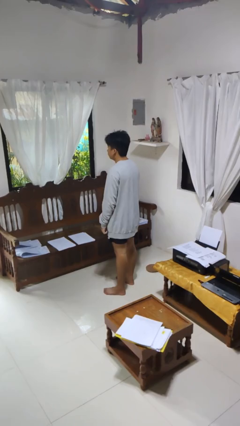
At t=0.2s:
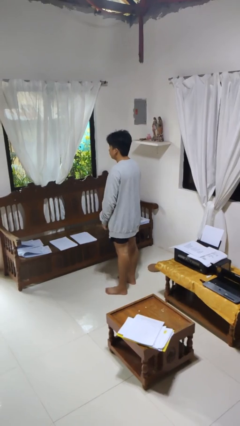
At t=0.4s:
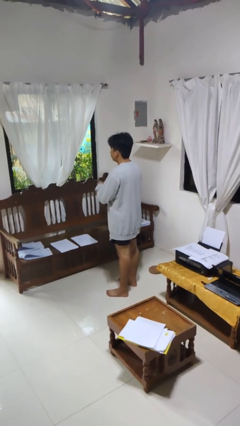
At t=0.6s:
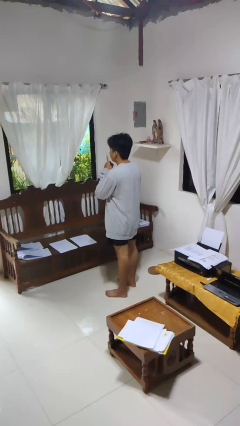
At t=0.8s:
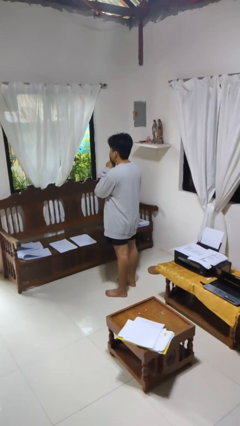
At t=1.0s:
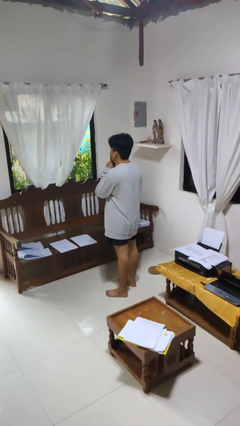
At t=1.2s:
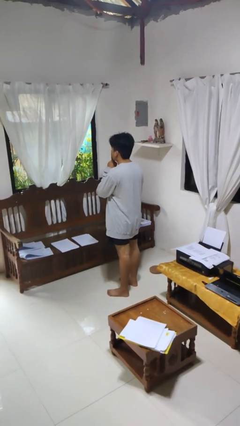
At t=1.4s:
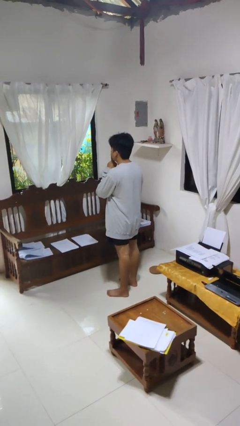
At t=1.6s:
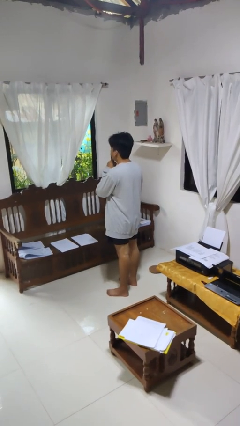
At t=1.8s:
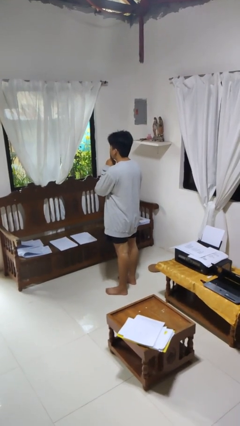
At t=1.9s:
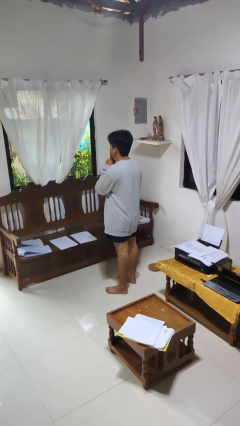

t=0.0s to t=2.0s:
person gestures be quiet

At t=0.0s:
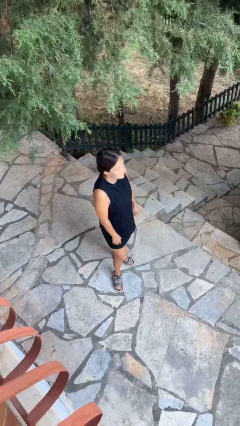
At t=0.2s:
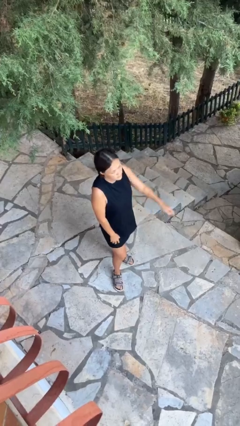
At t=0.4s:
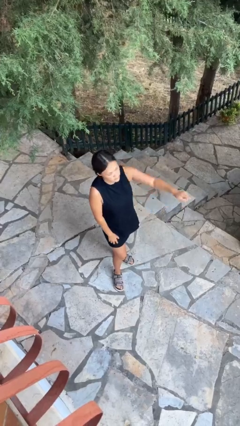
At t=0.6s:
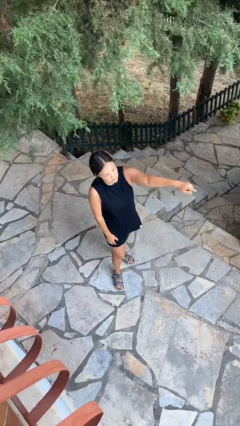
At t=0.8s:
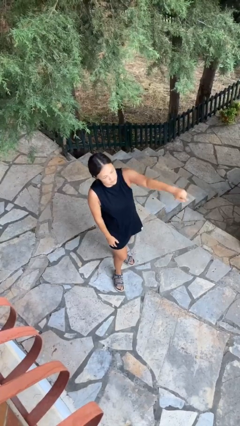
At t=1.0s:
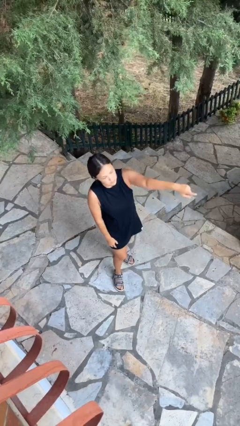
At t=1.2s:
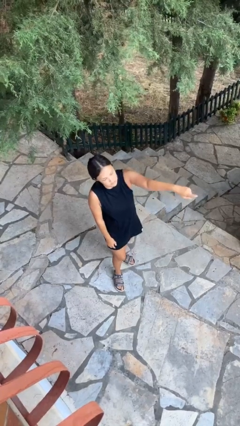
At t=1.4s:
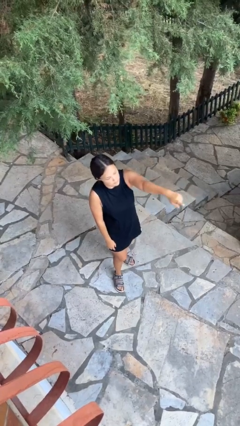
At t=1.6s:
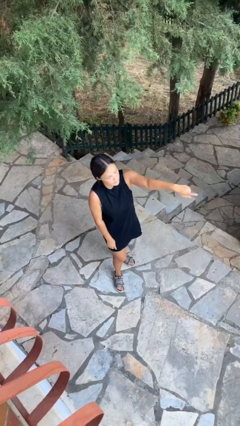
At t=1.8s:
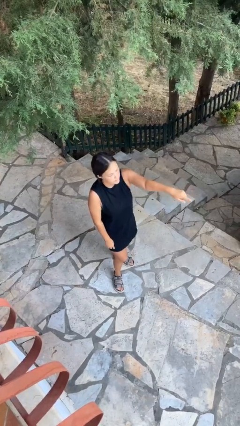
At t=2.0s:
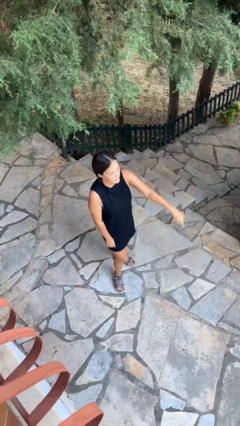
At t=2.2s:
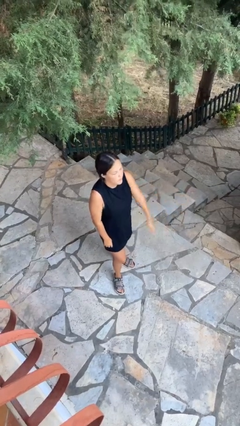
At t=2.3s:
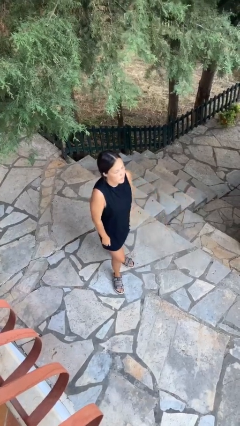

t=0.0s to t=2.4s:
person points at person

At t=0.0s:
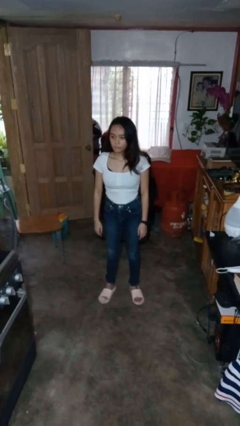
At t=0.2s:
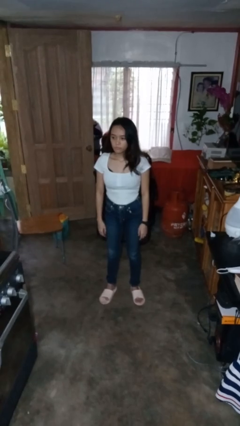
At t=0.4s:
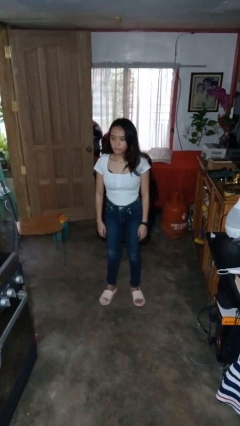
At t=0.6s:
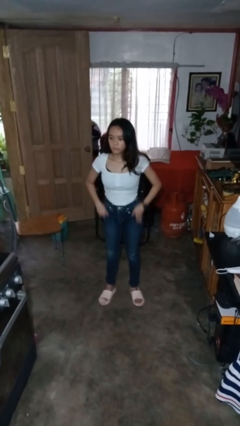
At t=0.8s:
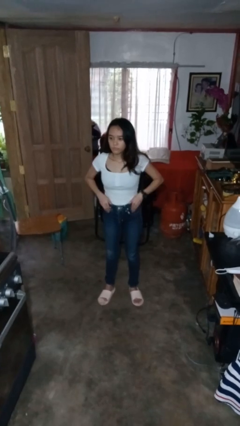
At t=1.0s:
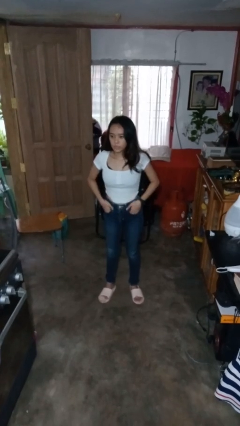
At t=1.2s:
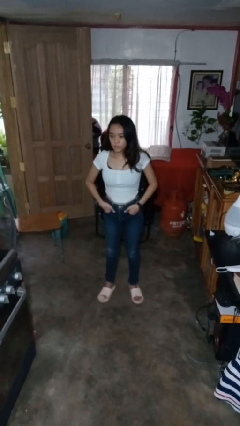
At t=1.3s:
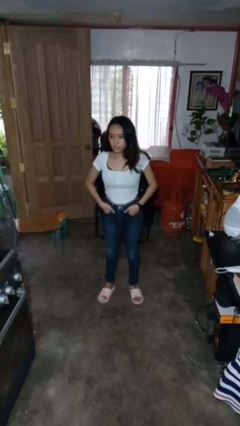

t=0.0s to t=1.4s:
person puts hands in back pockets

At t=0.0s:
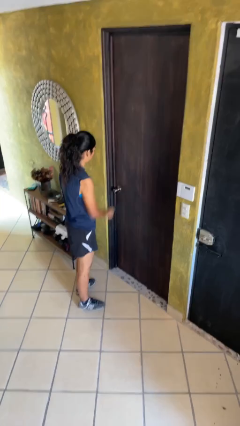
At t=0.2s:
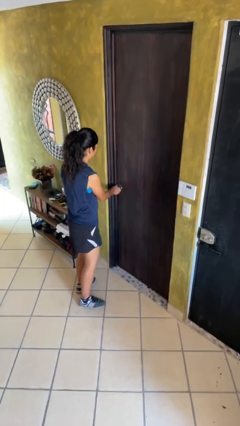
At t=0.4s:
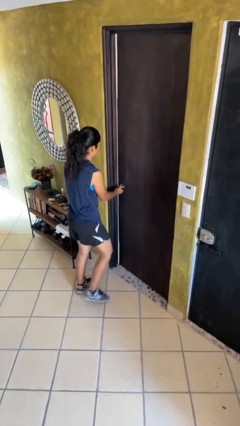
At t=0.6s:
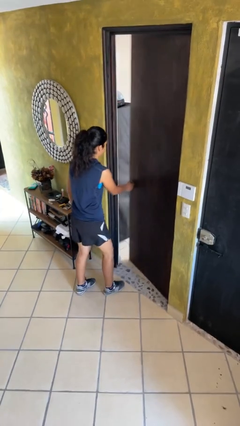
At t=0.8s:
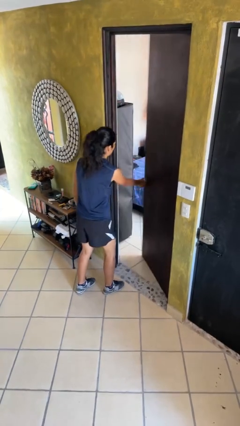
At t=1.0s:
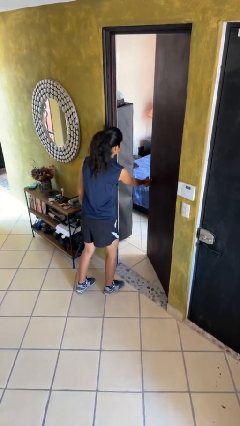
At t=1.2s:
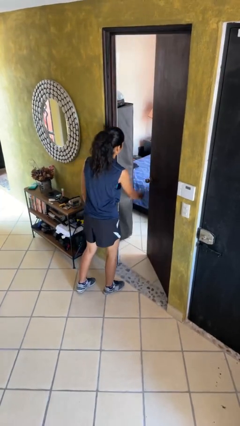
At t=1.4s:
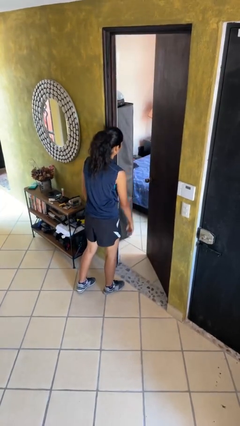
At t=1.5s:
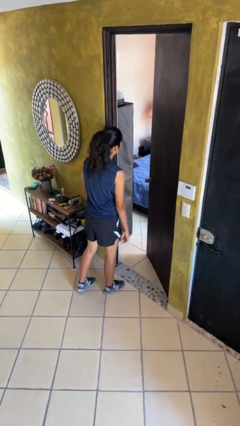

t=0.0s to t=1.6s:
person opens facility door

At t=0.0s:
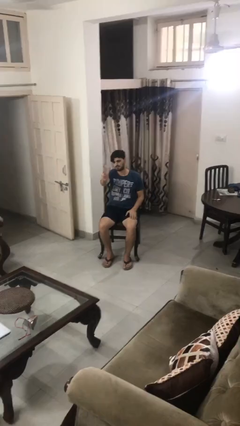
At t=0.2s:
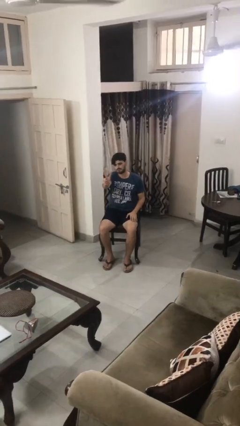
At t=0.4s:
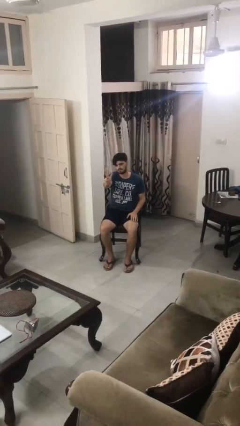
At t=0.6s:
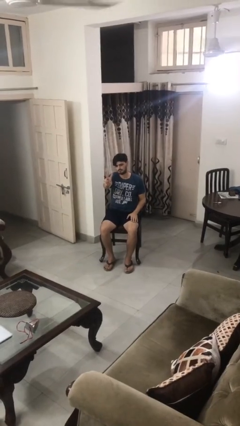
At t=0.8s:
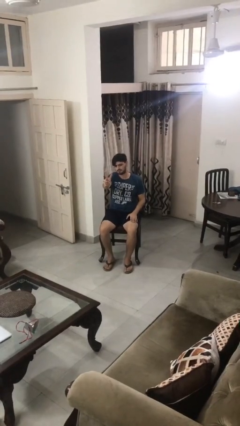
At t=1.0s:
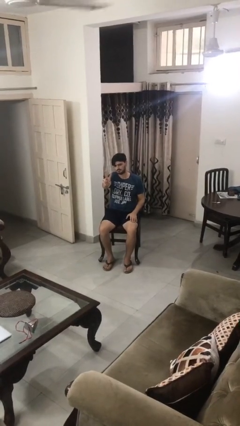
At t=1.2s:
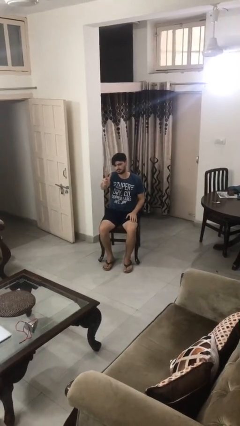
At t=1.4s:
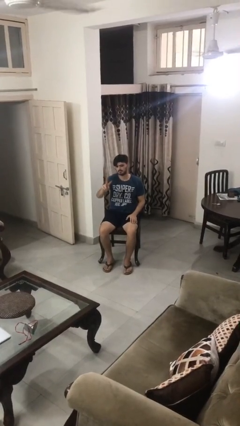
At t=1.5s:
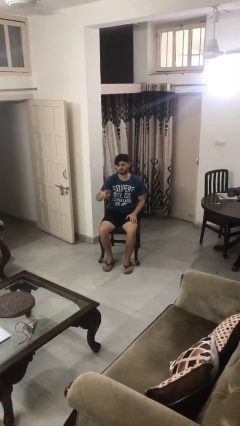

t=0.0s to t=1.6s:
person gestures peace

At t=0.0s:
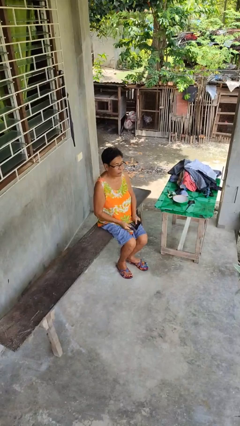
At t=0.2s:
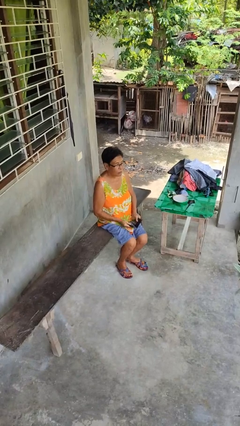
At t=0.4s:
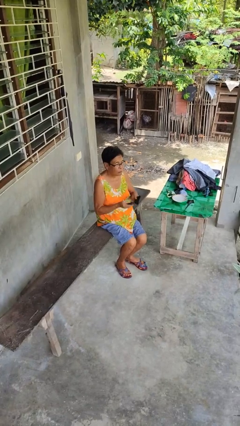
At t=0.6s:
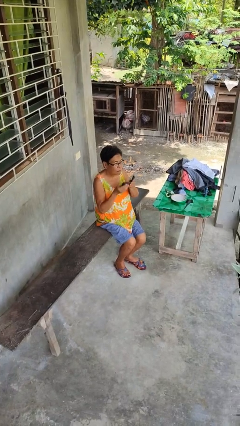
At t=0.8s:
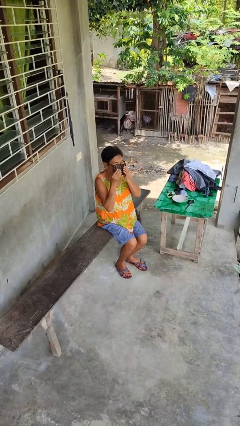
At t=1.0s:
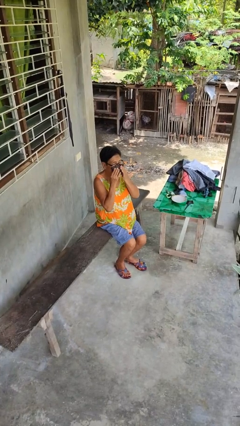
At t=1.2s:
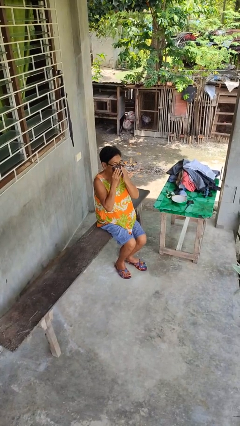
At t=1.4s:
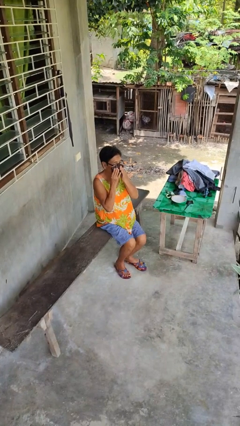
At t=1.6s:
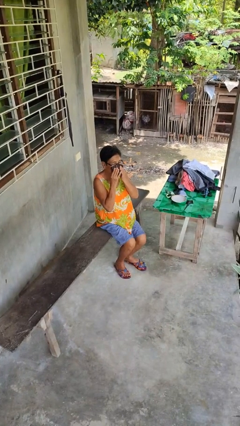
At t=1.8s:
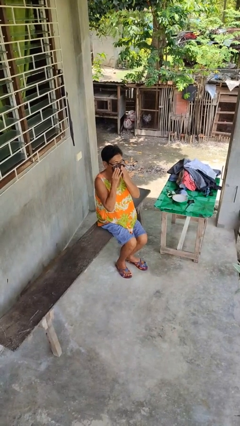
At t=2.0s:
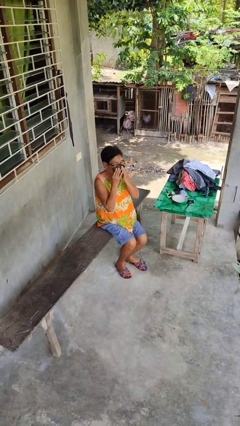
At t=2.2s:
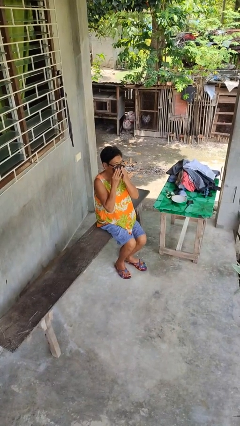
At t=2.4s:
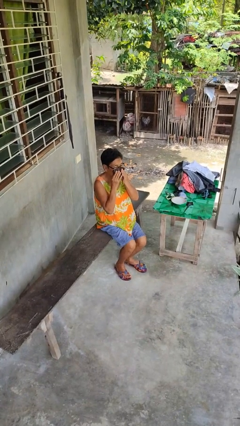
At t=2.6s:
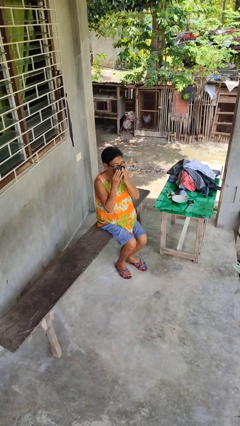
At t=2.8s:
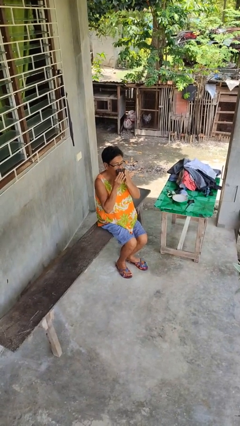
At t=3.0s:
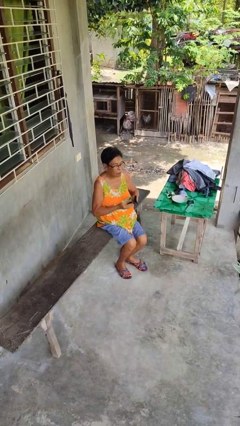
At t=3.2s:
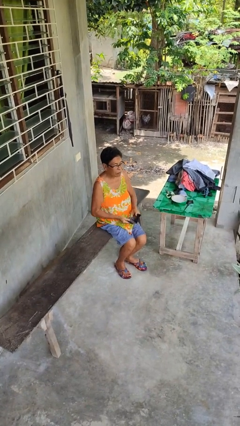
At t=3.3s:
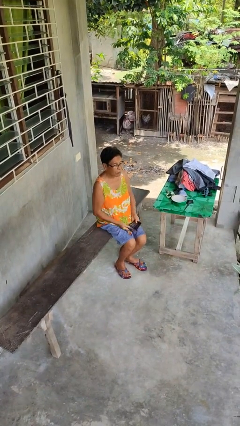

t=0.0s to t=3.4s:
person blows nose

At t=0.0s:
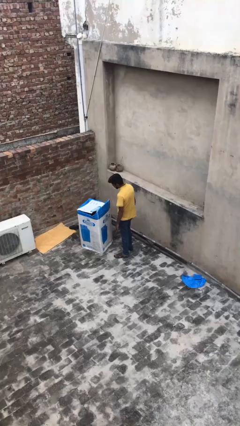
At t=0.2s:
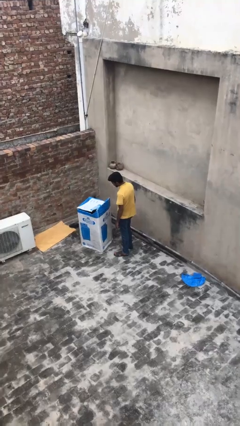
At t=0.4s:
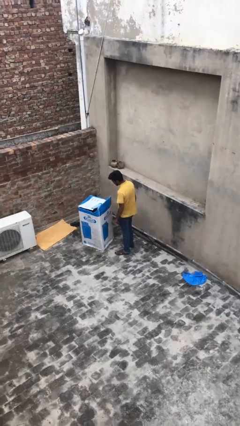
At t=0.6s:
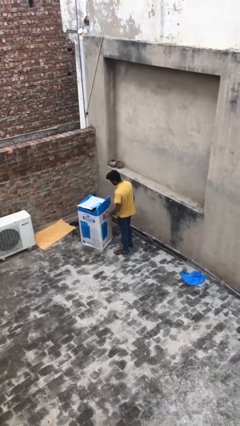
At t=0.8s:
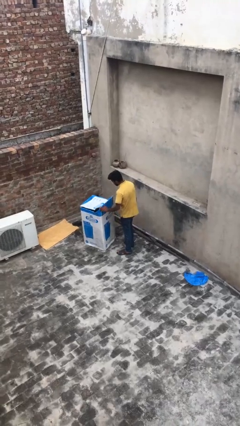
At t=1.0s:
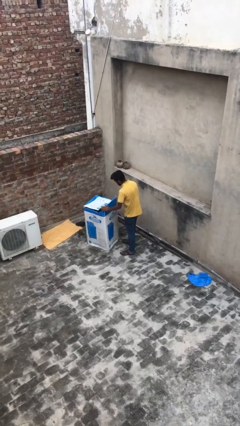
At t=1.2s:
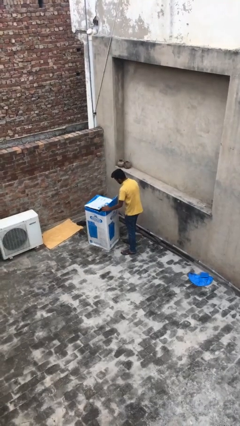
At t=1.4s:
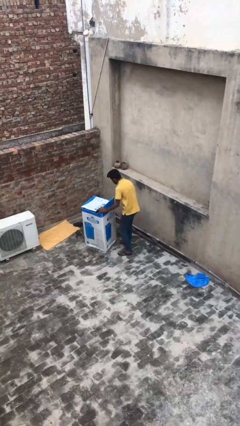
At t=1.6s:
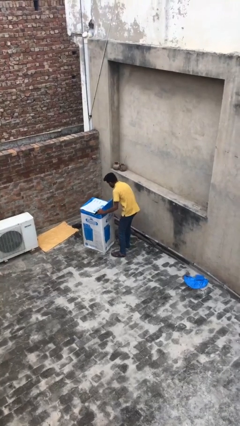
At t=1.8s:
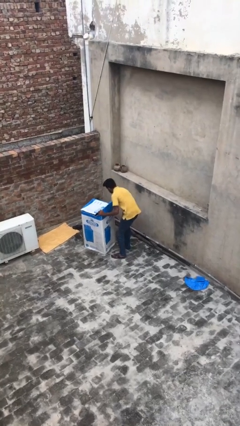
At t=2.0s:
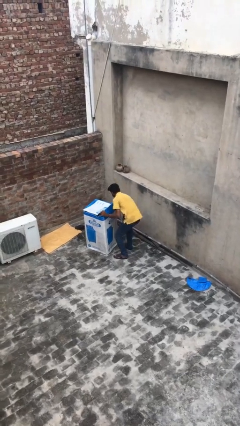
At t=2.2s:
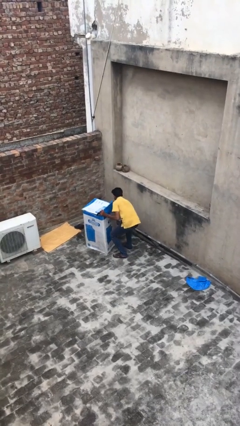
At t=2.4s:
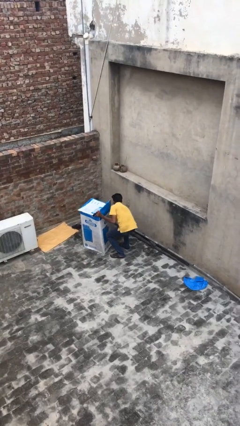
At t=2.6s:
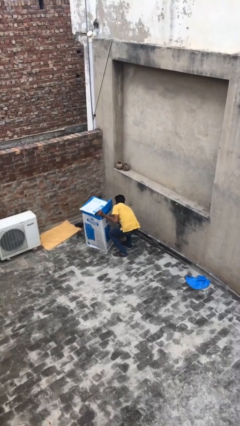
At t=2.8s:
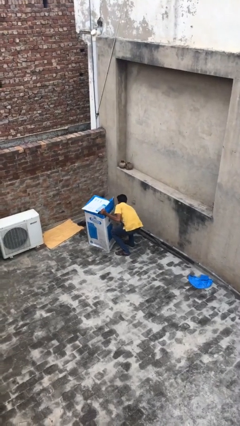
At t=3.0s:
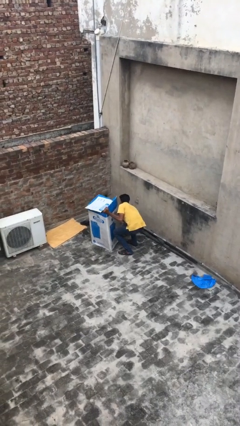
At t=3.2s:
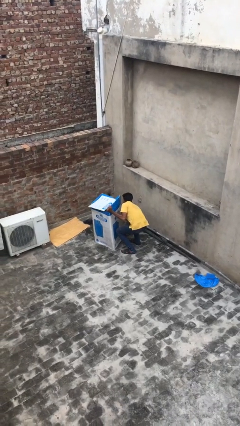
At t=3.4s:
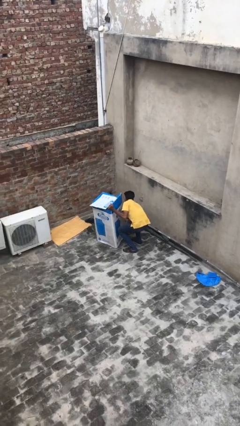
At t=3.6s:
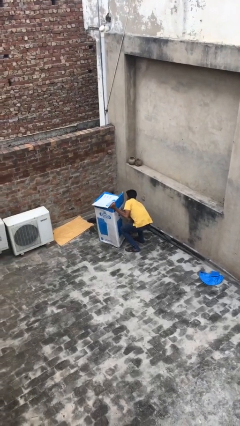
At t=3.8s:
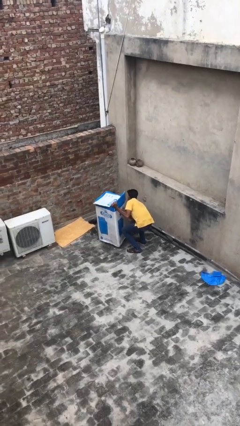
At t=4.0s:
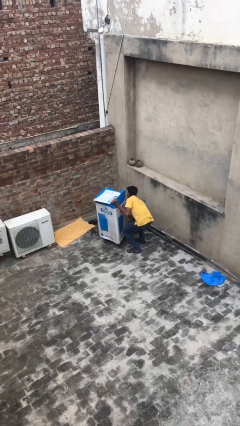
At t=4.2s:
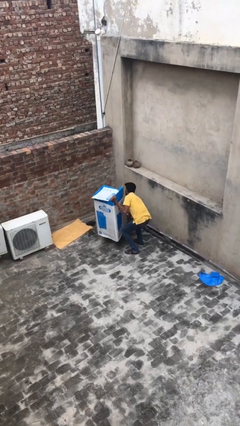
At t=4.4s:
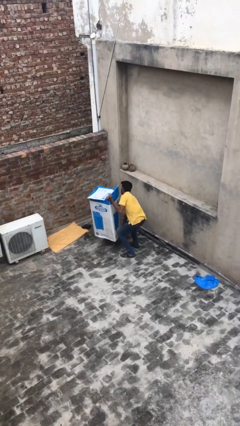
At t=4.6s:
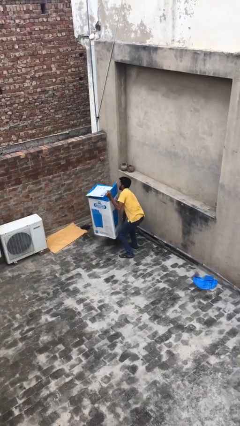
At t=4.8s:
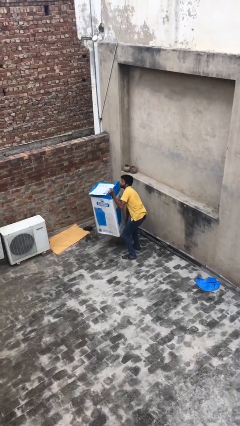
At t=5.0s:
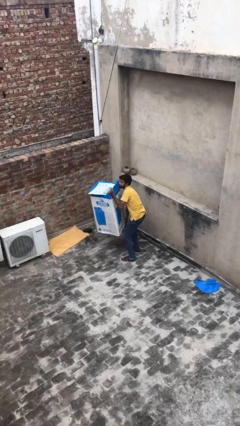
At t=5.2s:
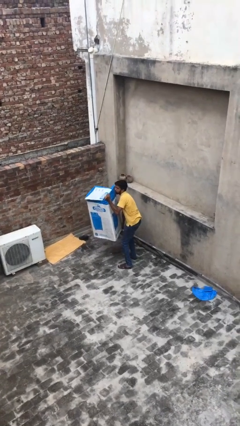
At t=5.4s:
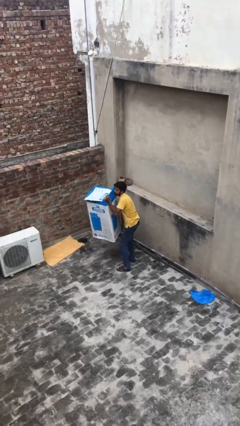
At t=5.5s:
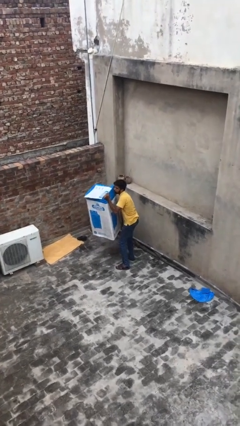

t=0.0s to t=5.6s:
person picks up object from floor
